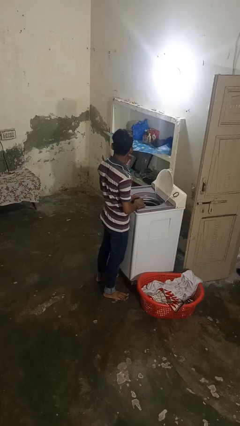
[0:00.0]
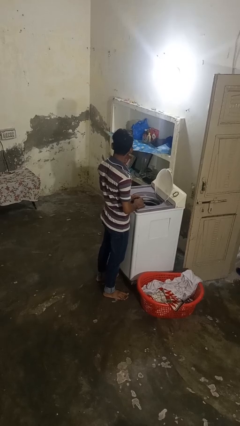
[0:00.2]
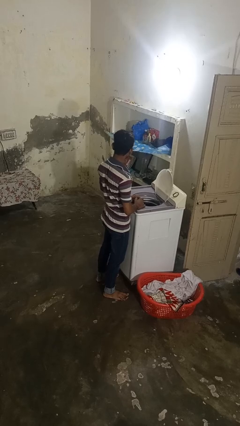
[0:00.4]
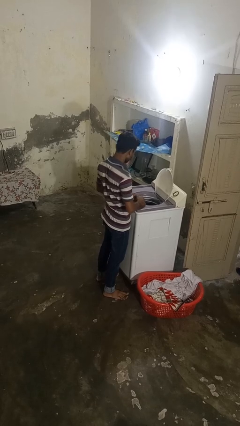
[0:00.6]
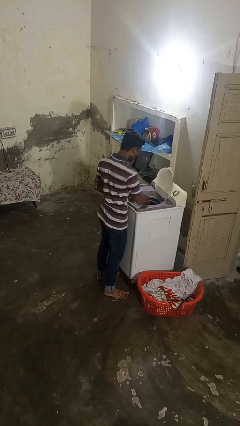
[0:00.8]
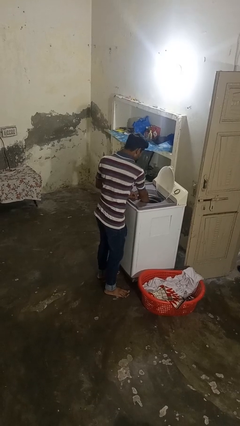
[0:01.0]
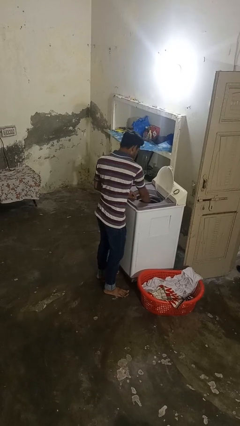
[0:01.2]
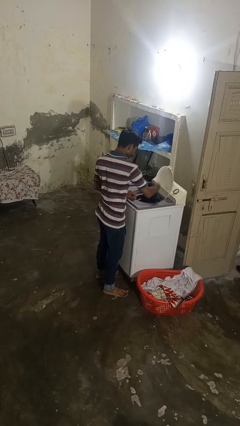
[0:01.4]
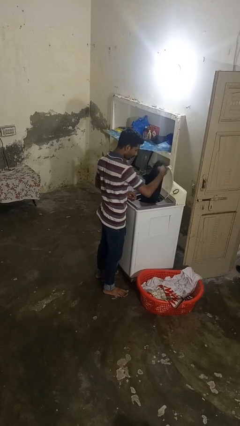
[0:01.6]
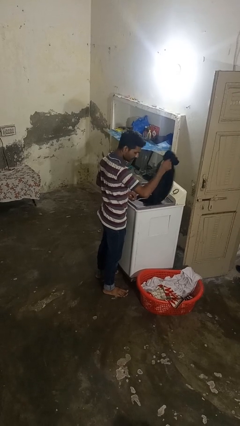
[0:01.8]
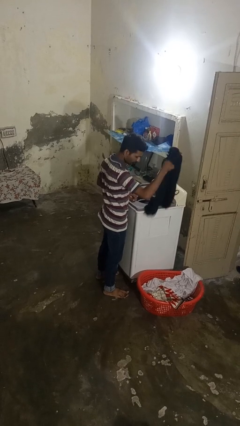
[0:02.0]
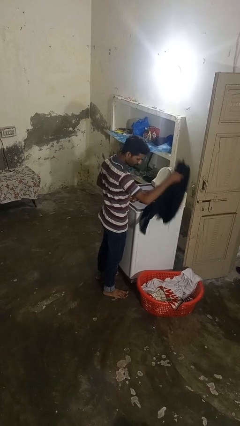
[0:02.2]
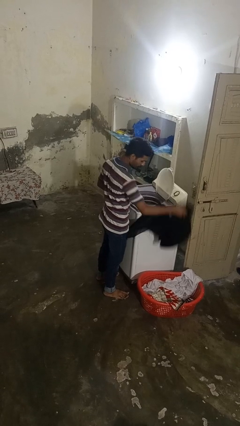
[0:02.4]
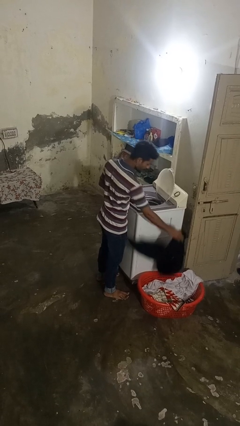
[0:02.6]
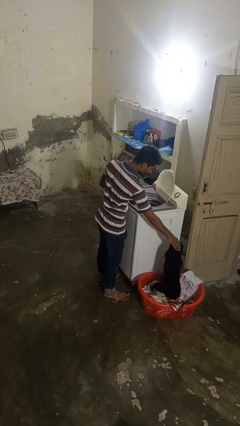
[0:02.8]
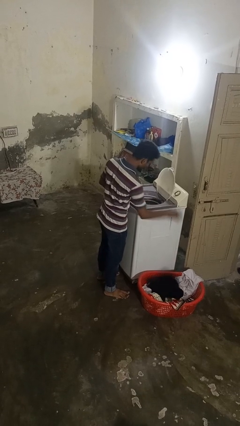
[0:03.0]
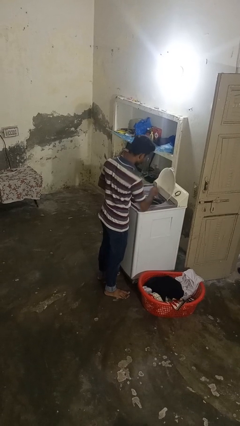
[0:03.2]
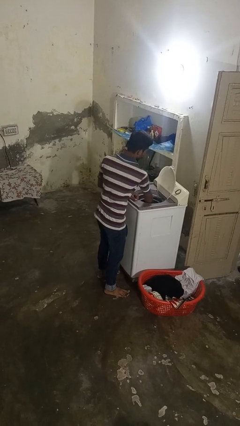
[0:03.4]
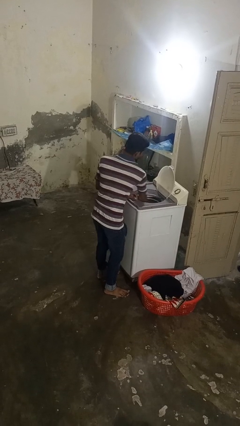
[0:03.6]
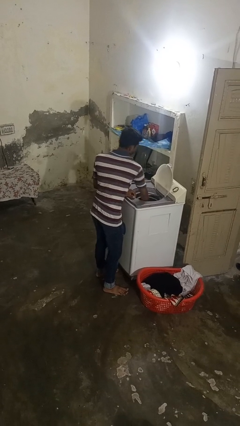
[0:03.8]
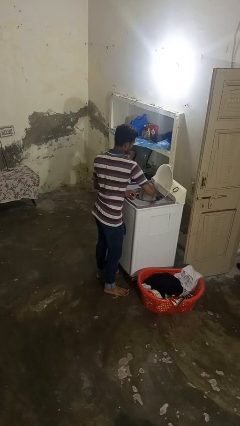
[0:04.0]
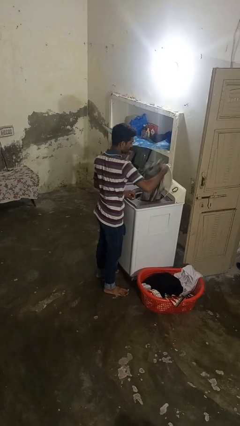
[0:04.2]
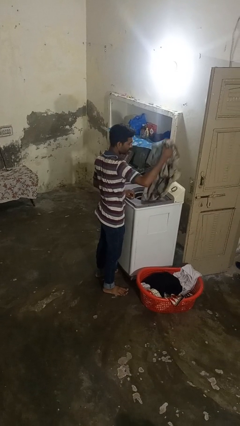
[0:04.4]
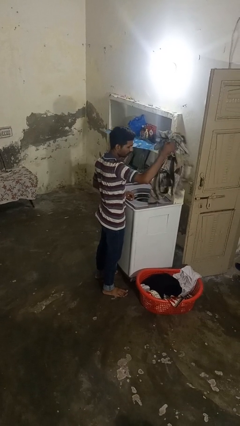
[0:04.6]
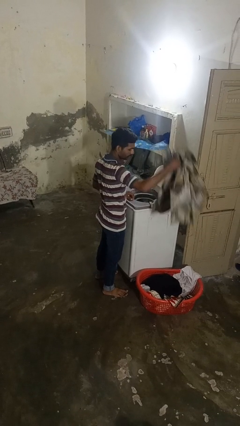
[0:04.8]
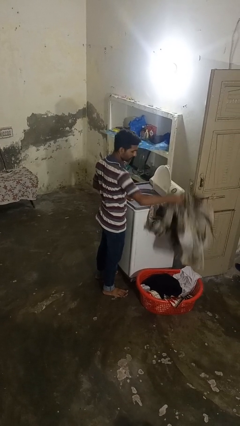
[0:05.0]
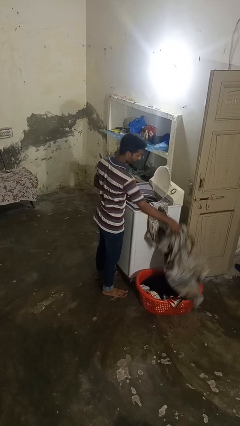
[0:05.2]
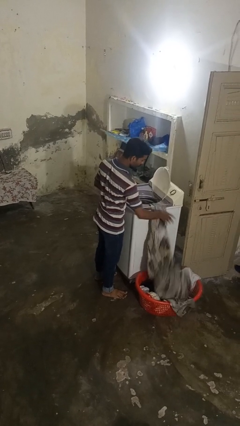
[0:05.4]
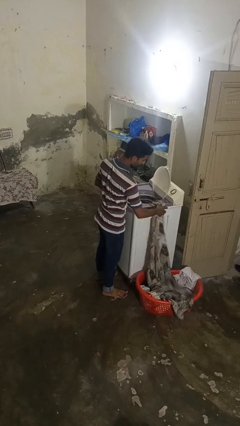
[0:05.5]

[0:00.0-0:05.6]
person unloads dryer

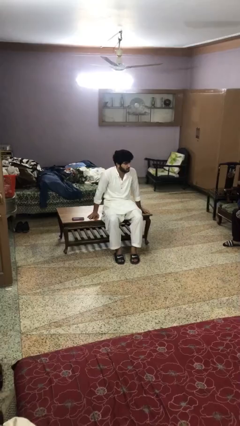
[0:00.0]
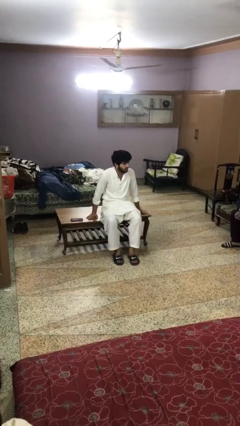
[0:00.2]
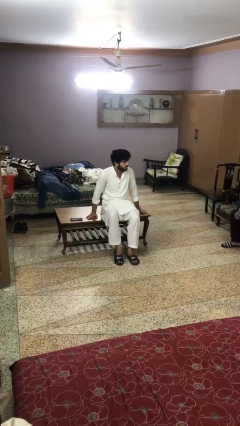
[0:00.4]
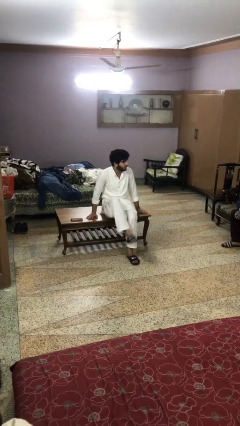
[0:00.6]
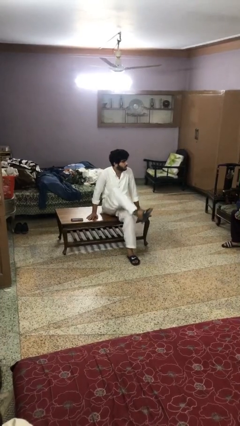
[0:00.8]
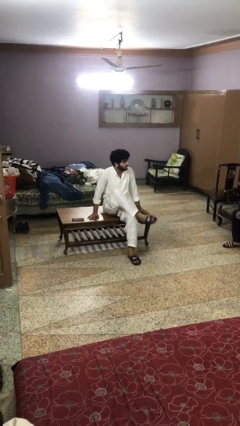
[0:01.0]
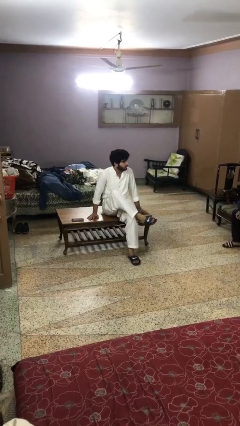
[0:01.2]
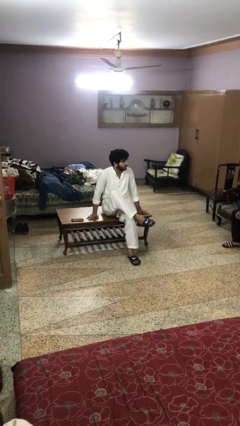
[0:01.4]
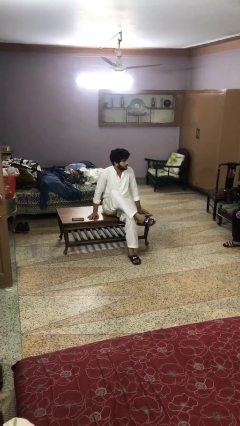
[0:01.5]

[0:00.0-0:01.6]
person crosses legs

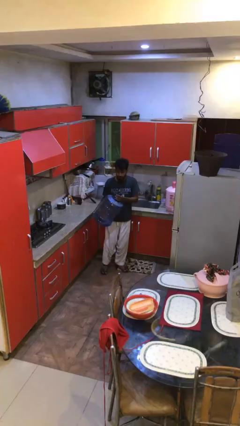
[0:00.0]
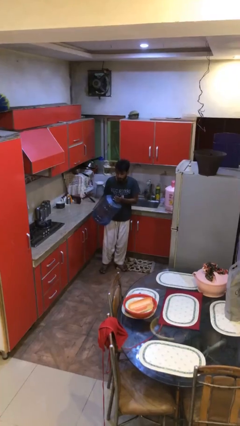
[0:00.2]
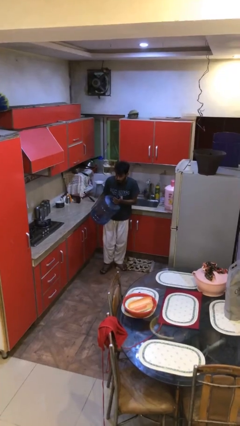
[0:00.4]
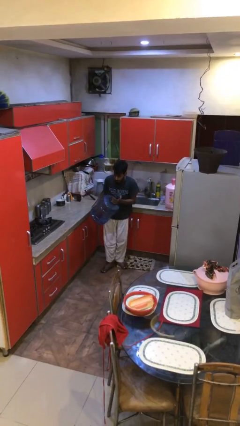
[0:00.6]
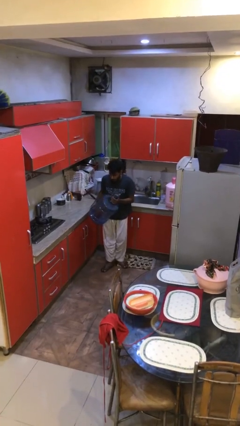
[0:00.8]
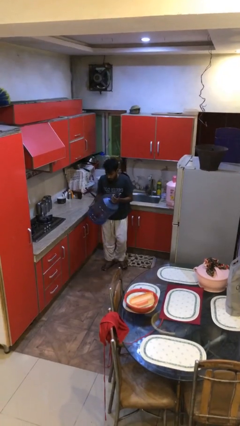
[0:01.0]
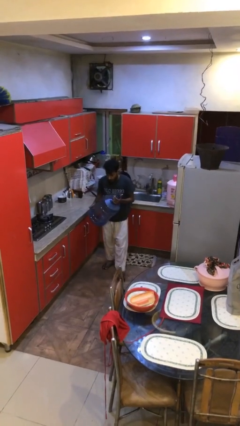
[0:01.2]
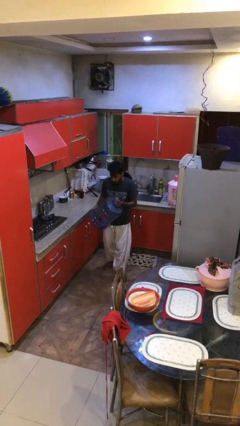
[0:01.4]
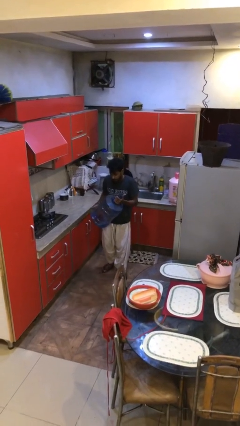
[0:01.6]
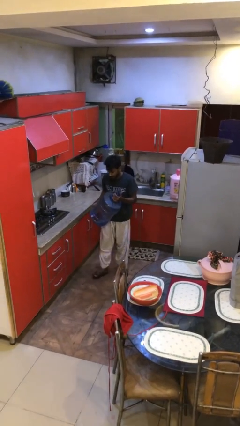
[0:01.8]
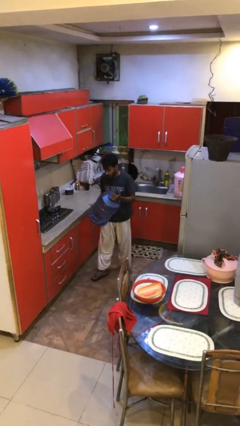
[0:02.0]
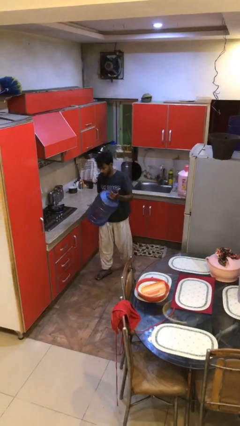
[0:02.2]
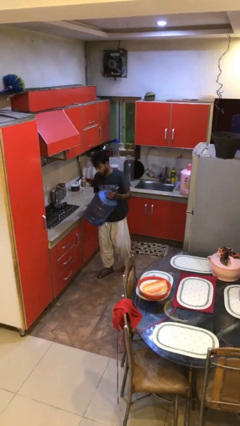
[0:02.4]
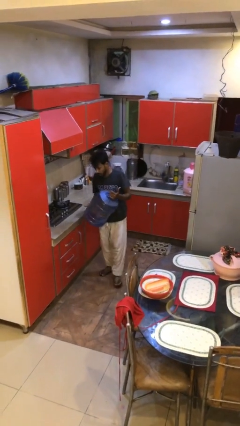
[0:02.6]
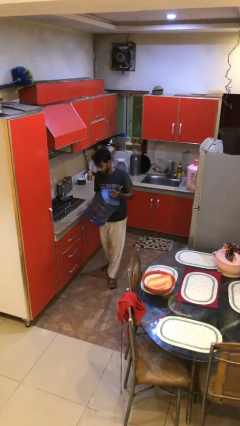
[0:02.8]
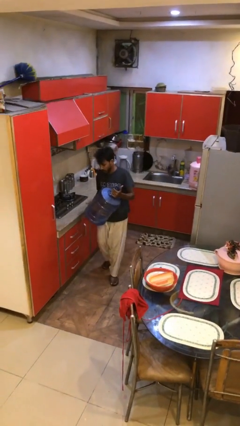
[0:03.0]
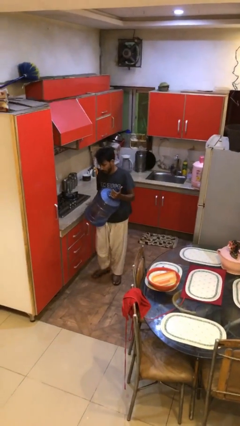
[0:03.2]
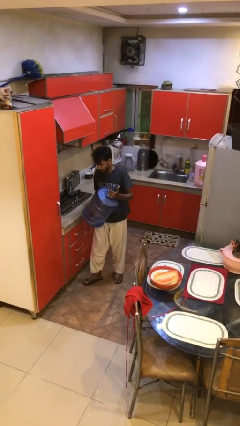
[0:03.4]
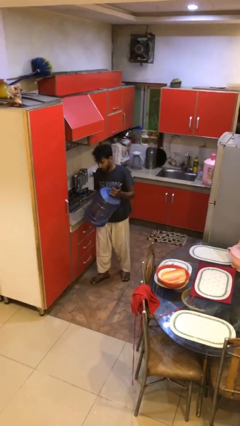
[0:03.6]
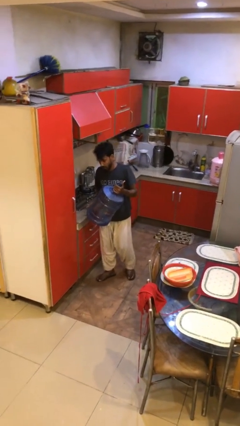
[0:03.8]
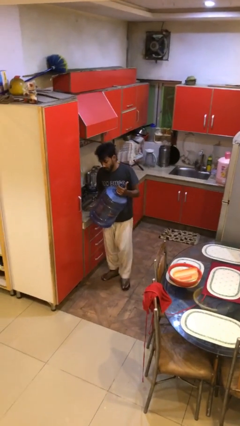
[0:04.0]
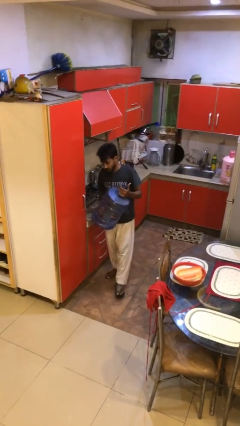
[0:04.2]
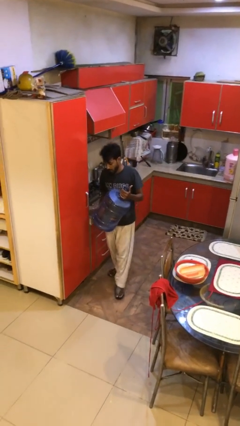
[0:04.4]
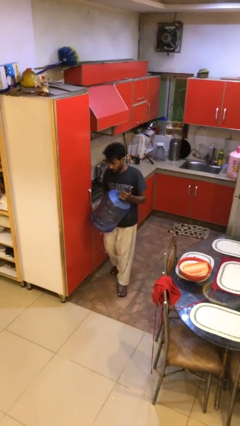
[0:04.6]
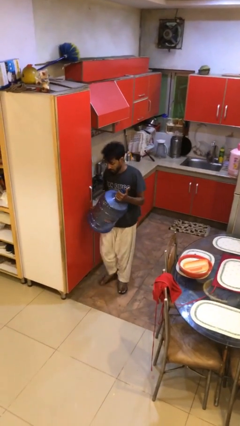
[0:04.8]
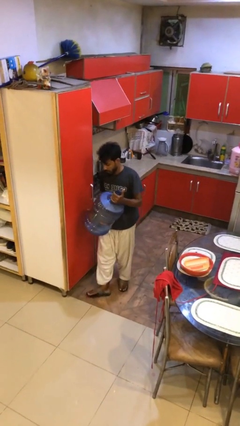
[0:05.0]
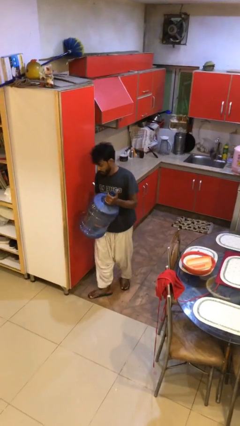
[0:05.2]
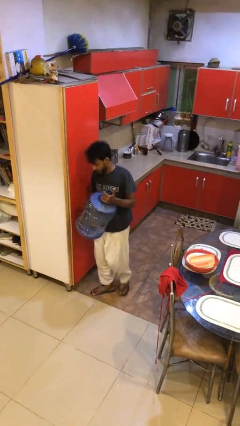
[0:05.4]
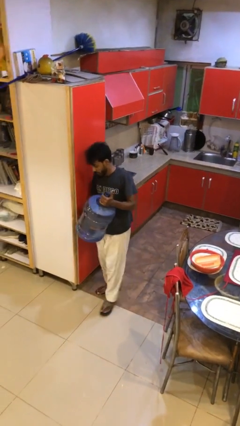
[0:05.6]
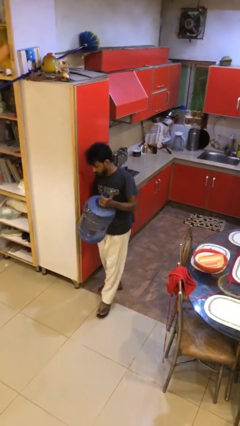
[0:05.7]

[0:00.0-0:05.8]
person carries heavy object

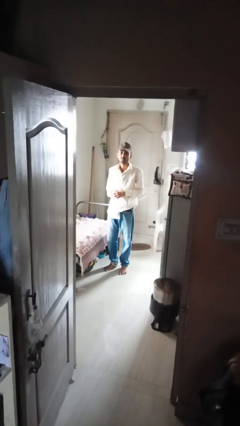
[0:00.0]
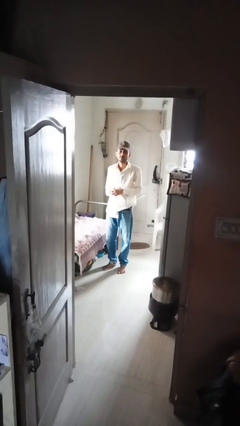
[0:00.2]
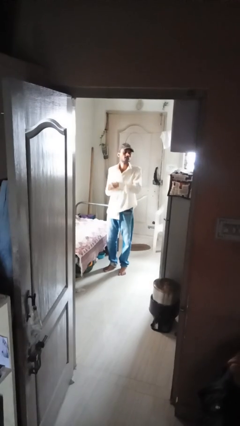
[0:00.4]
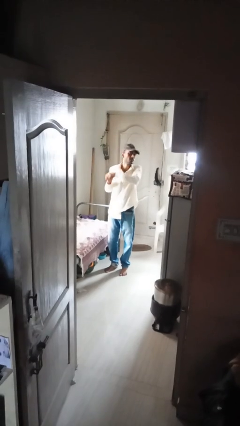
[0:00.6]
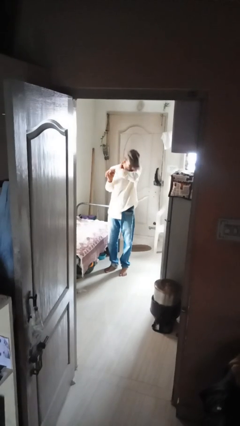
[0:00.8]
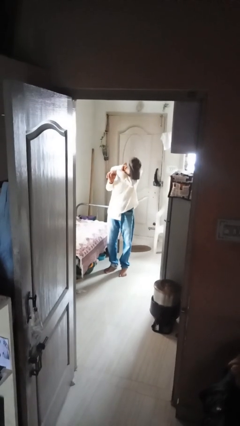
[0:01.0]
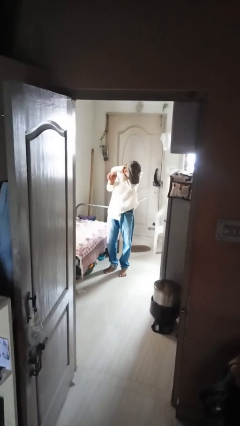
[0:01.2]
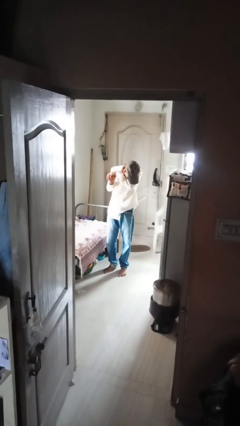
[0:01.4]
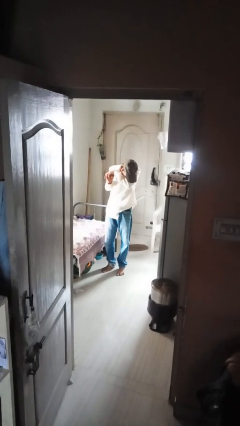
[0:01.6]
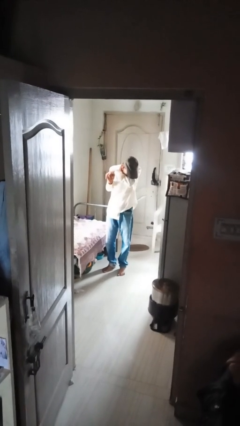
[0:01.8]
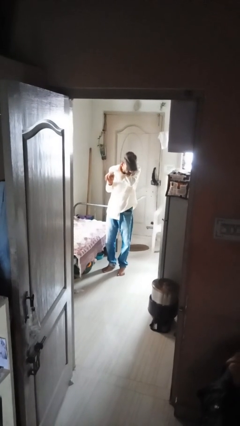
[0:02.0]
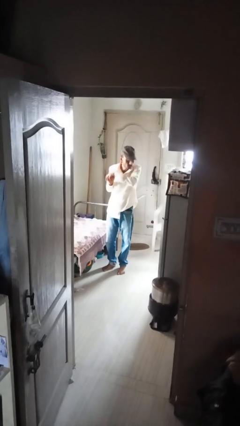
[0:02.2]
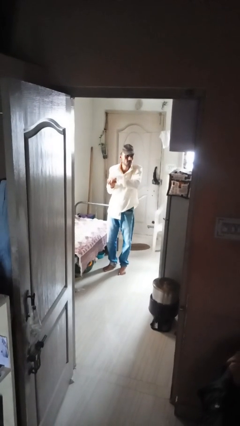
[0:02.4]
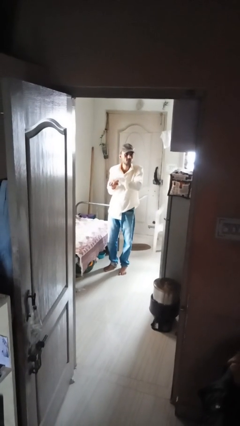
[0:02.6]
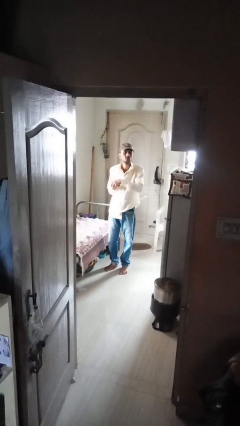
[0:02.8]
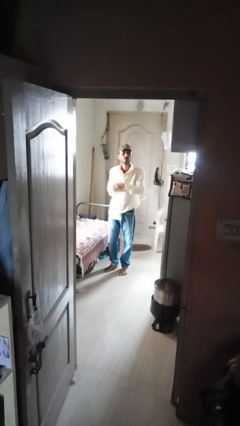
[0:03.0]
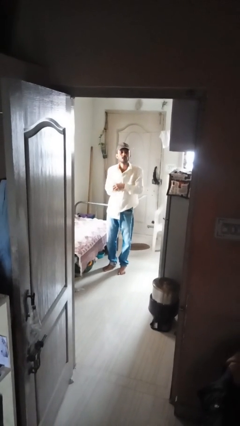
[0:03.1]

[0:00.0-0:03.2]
person sneezes into arm

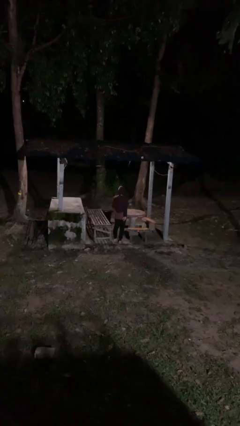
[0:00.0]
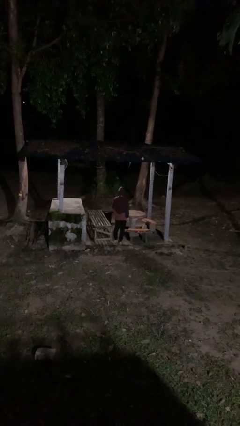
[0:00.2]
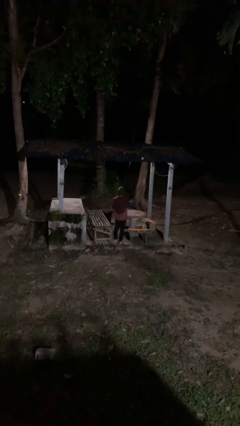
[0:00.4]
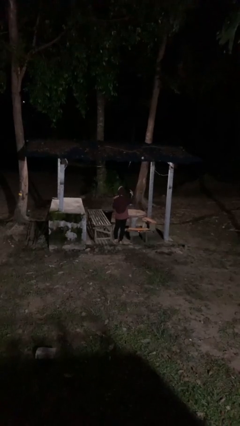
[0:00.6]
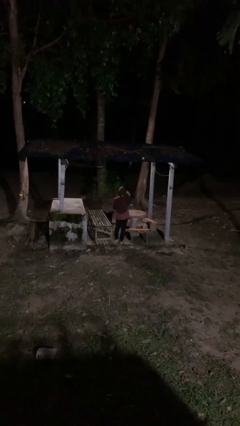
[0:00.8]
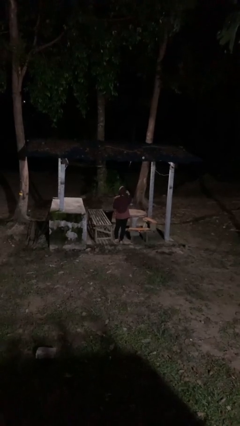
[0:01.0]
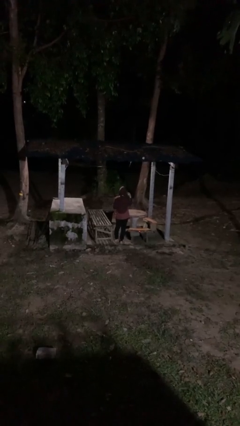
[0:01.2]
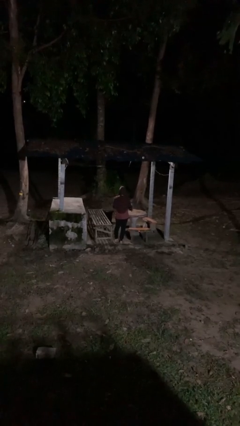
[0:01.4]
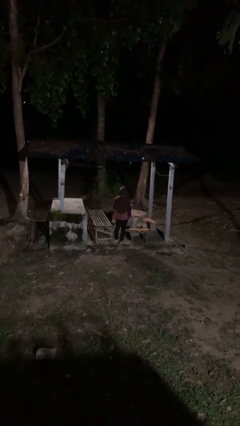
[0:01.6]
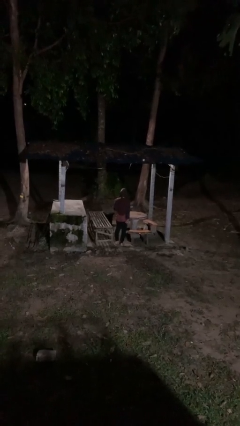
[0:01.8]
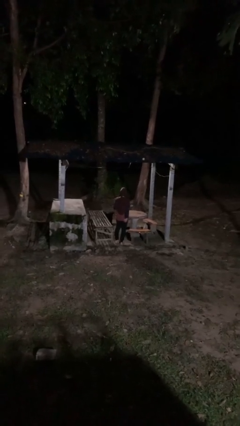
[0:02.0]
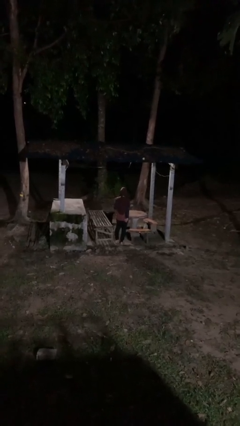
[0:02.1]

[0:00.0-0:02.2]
person gestures watch closely
